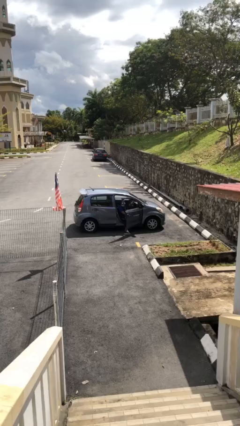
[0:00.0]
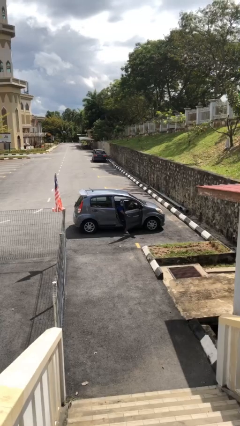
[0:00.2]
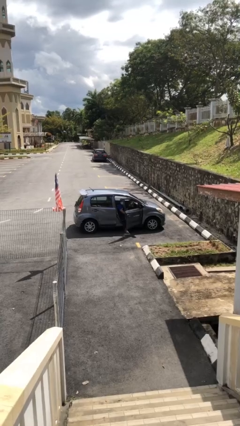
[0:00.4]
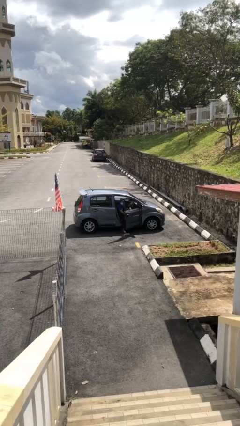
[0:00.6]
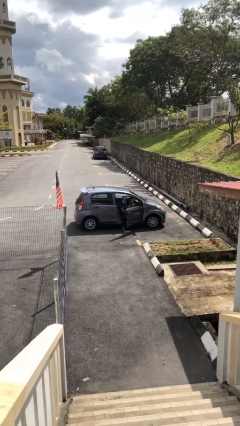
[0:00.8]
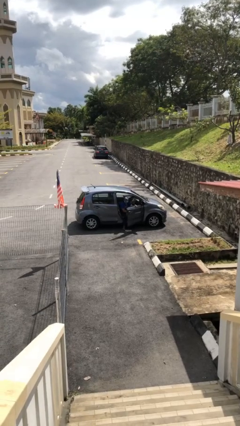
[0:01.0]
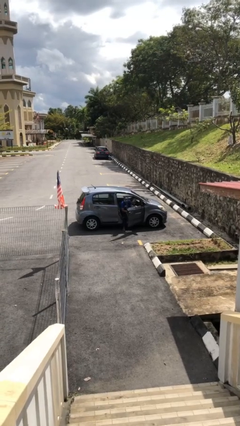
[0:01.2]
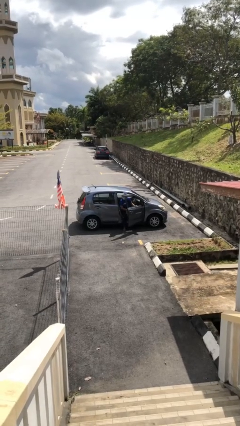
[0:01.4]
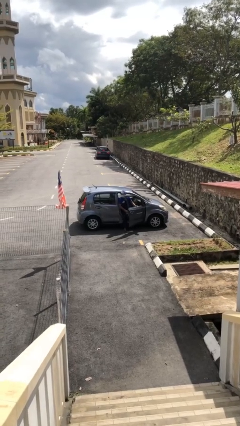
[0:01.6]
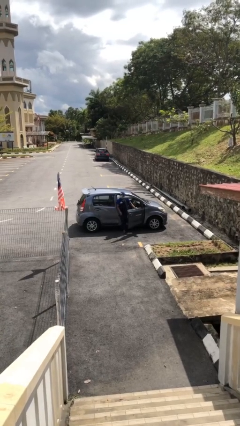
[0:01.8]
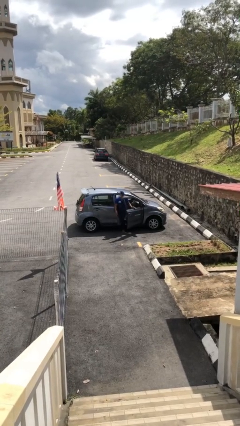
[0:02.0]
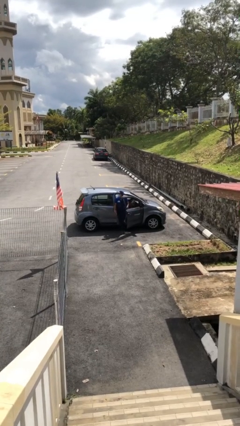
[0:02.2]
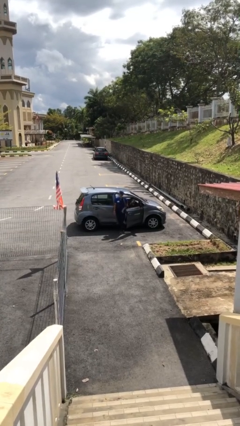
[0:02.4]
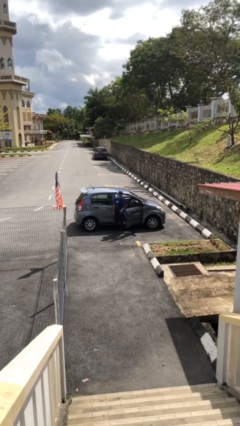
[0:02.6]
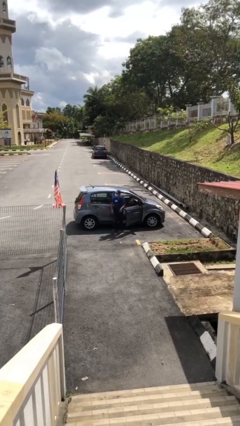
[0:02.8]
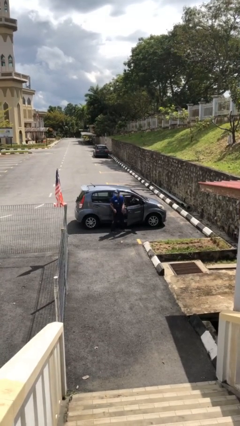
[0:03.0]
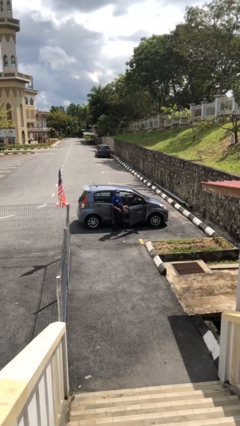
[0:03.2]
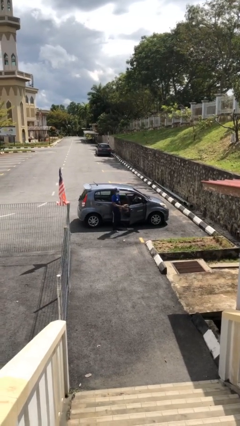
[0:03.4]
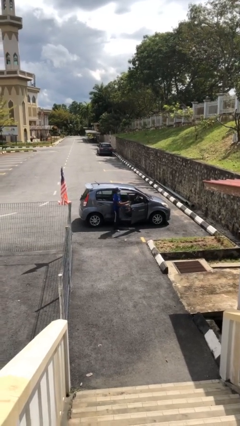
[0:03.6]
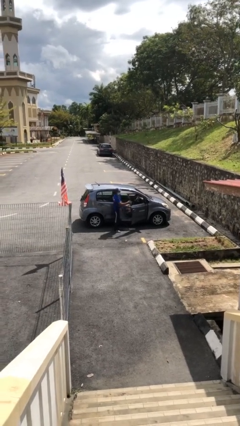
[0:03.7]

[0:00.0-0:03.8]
person exits car

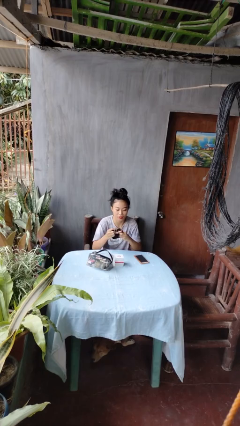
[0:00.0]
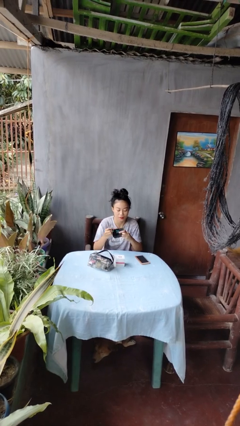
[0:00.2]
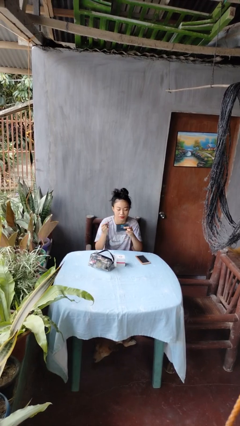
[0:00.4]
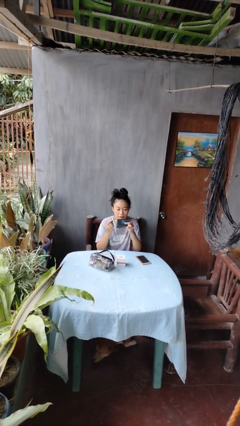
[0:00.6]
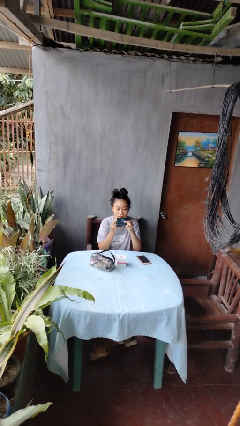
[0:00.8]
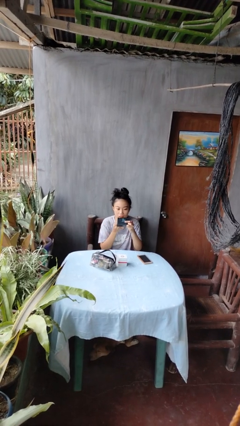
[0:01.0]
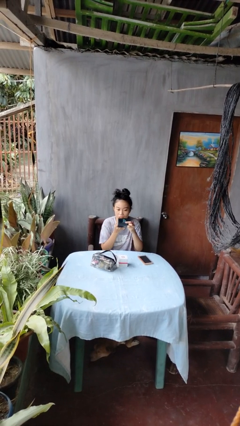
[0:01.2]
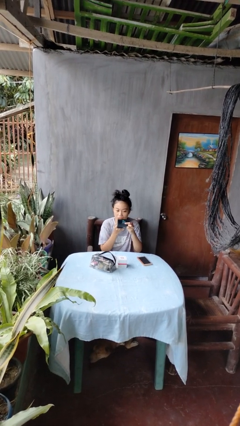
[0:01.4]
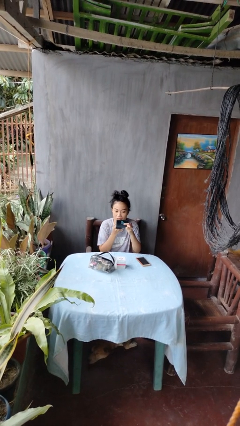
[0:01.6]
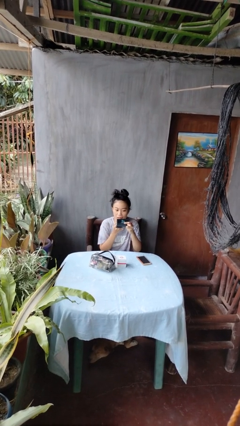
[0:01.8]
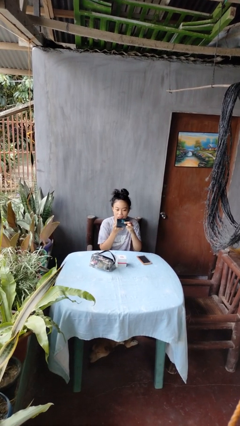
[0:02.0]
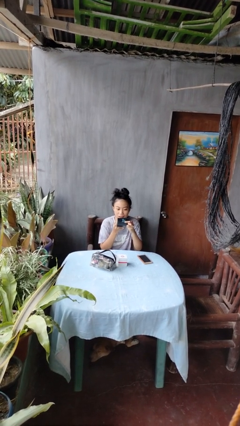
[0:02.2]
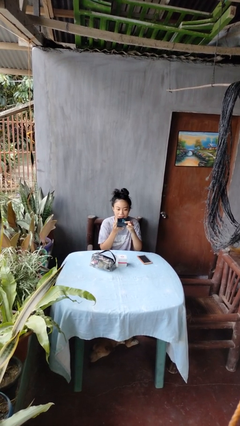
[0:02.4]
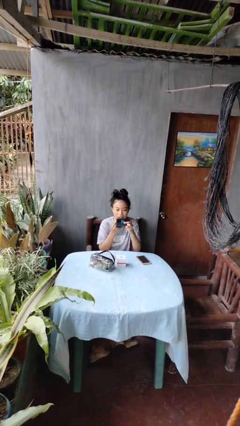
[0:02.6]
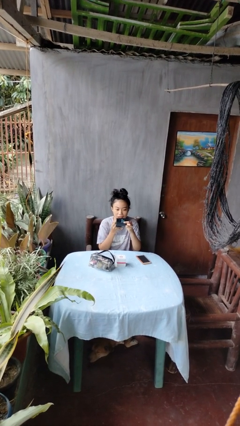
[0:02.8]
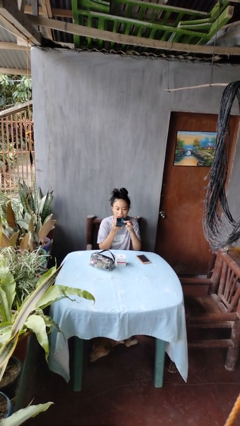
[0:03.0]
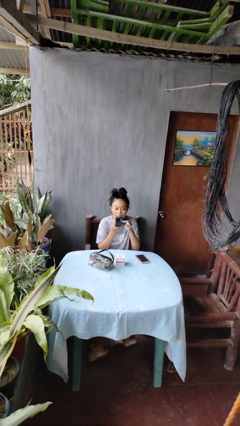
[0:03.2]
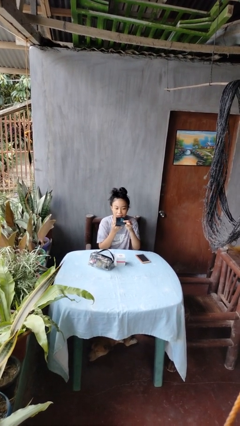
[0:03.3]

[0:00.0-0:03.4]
person applies lip makeup

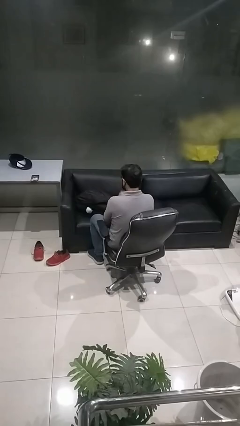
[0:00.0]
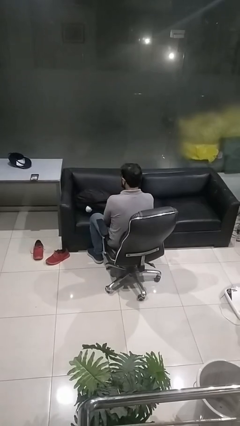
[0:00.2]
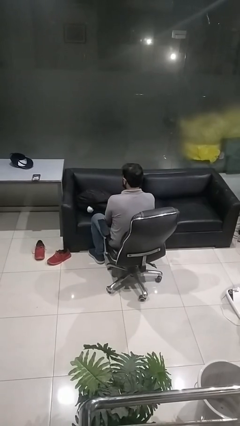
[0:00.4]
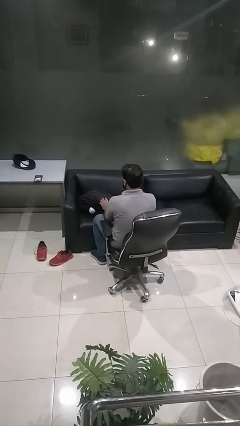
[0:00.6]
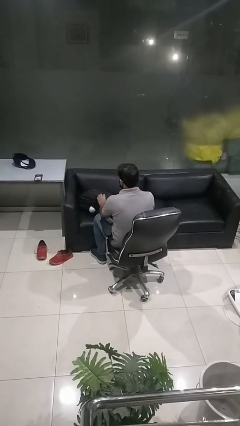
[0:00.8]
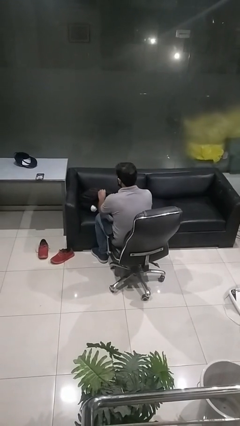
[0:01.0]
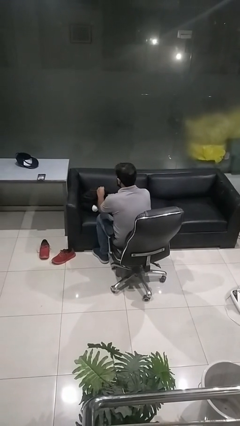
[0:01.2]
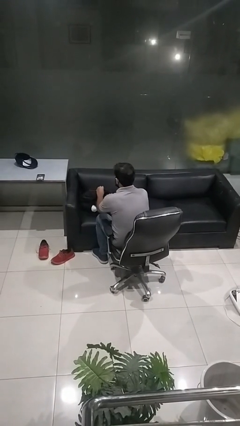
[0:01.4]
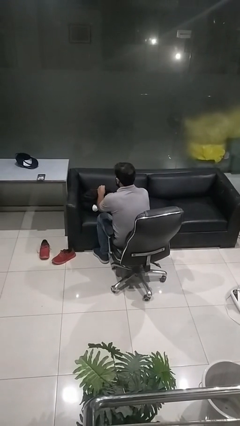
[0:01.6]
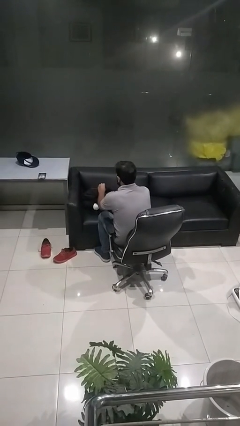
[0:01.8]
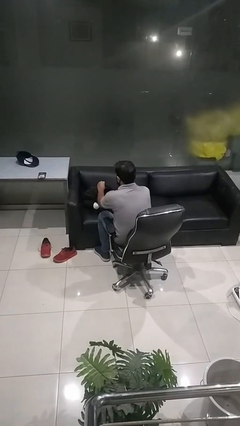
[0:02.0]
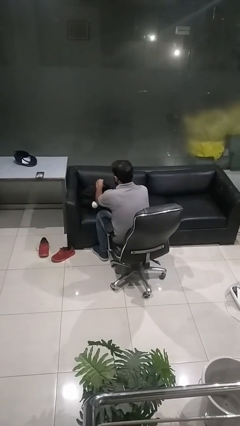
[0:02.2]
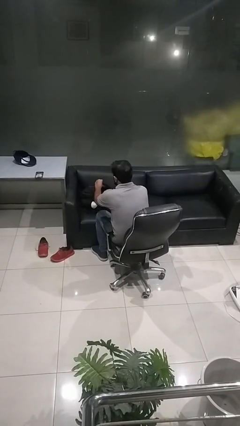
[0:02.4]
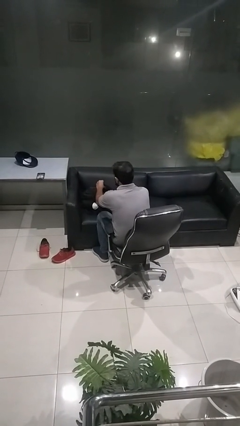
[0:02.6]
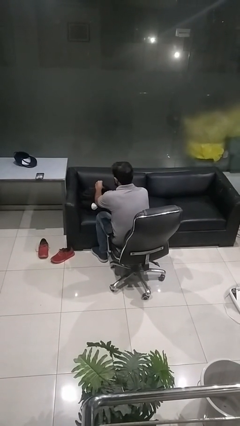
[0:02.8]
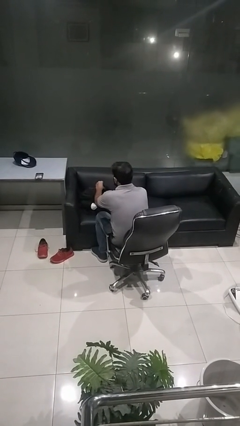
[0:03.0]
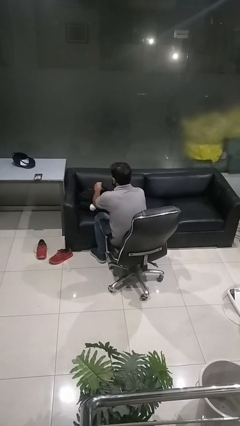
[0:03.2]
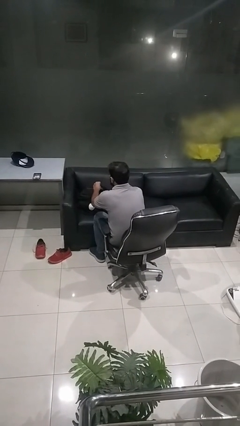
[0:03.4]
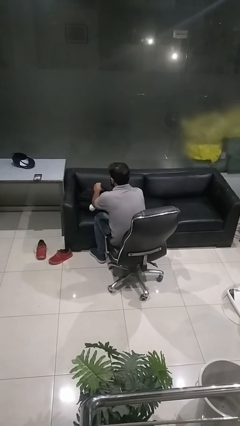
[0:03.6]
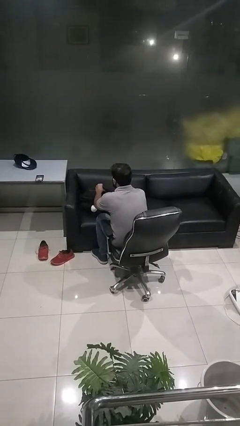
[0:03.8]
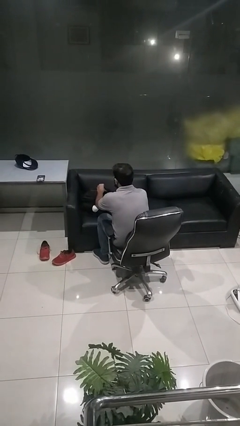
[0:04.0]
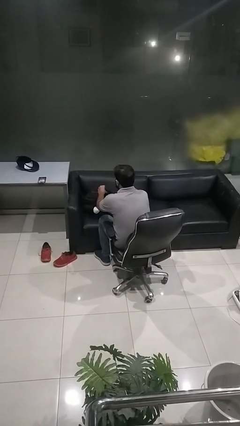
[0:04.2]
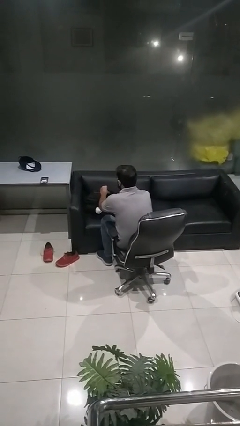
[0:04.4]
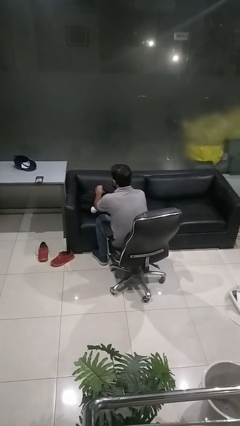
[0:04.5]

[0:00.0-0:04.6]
person searches in backpack

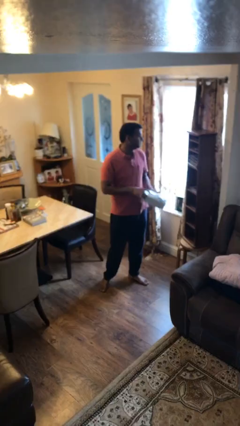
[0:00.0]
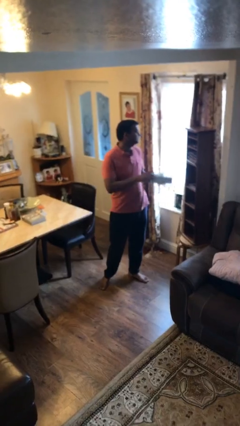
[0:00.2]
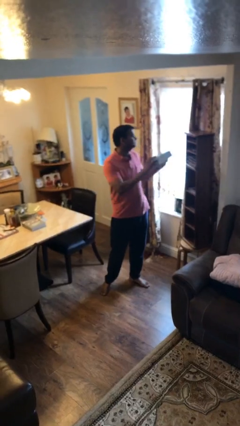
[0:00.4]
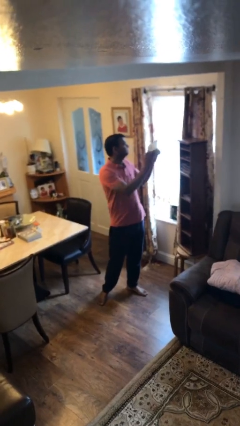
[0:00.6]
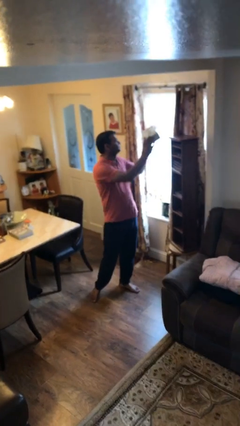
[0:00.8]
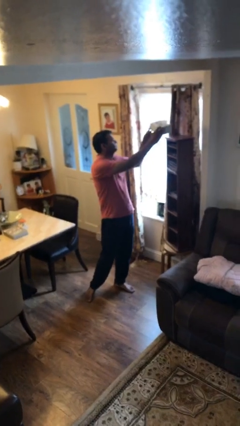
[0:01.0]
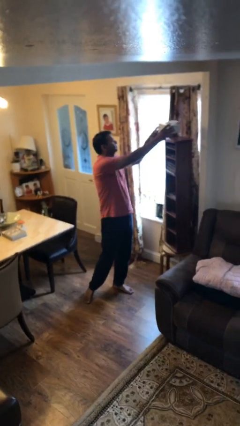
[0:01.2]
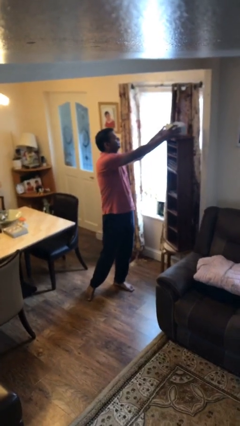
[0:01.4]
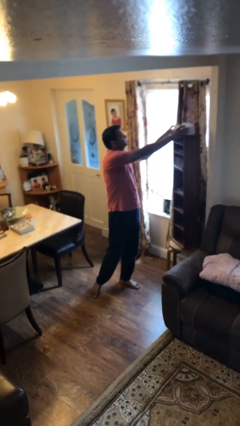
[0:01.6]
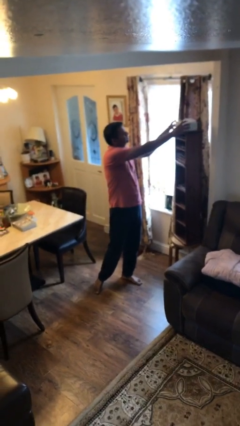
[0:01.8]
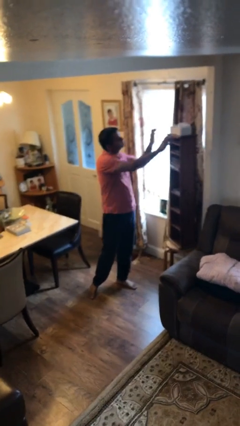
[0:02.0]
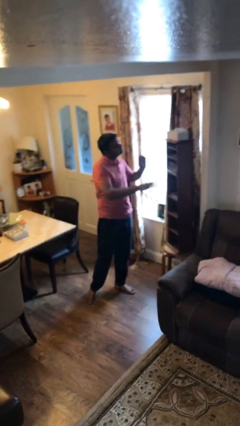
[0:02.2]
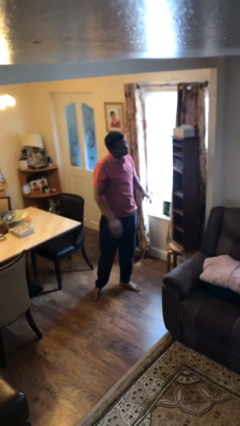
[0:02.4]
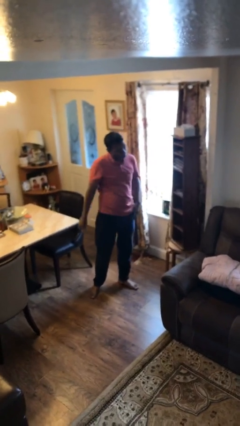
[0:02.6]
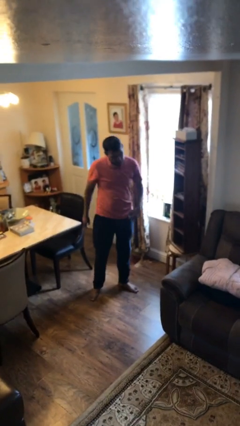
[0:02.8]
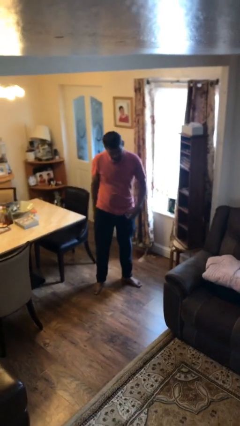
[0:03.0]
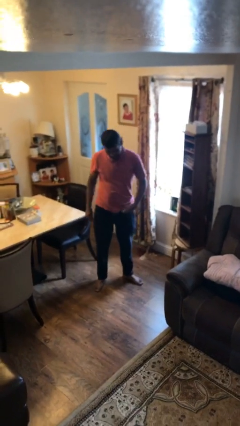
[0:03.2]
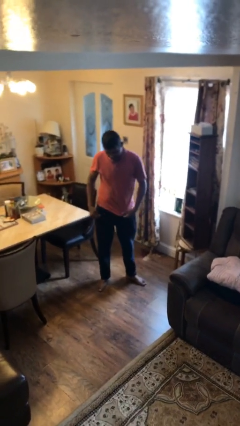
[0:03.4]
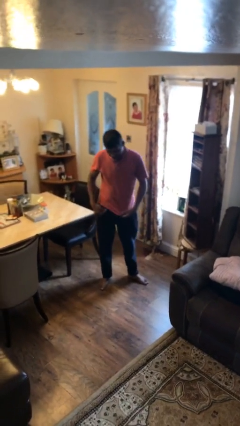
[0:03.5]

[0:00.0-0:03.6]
person puts down object on shelf

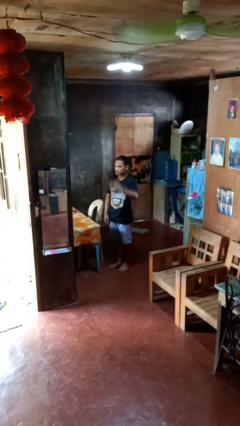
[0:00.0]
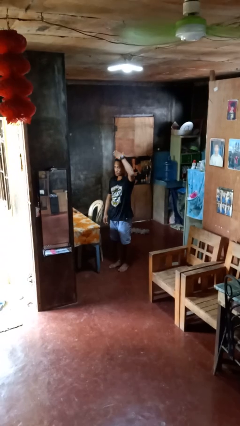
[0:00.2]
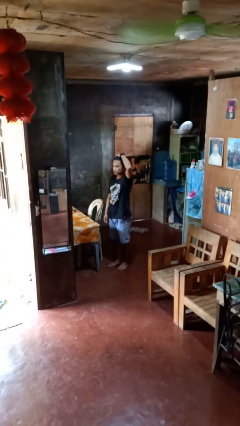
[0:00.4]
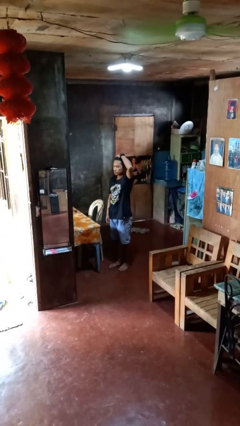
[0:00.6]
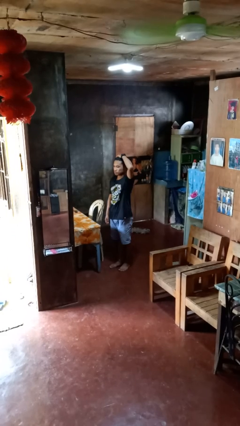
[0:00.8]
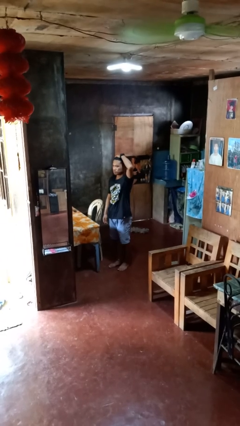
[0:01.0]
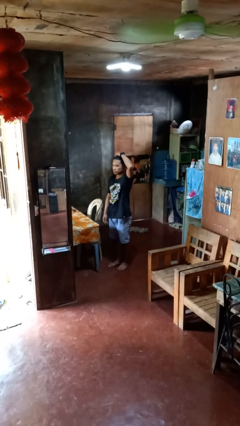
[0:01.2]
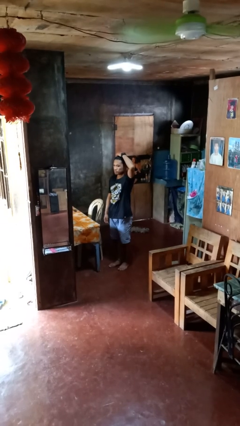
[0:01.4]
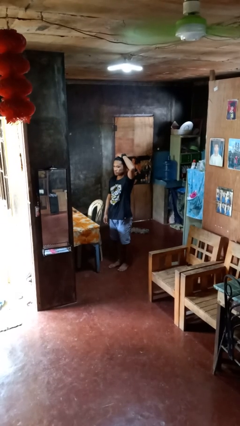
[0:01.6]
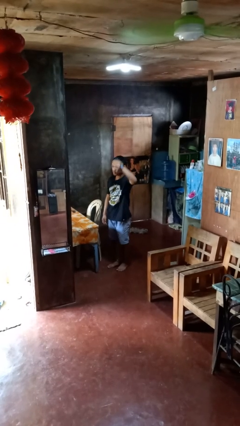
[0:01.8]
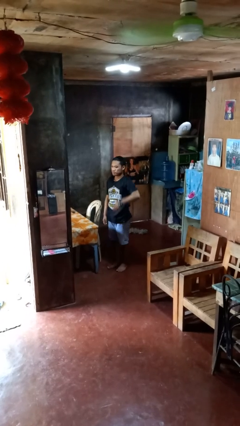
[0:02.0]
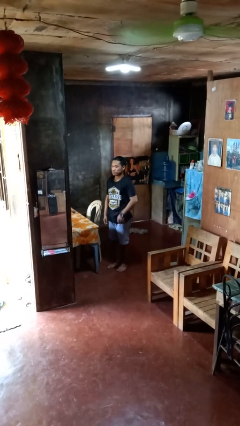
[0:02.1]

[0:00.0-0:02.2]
person pats head
